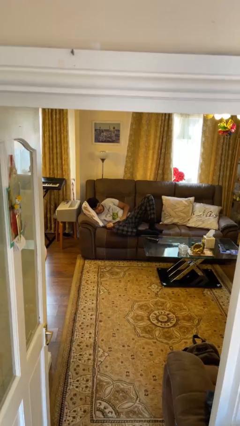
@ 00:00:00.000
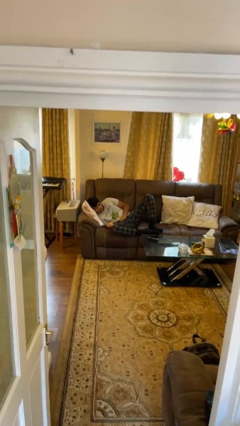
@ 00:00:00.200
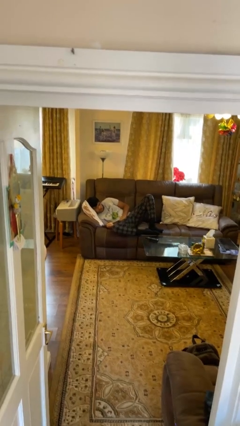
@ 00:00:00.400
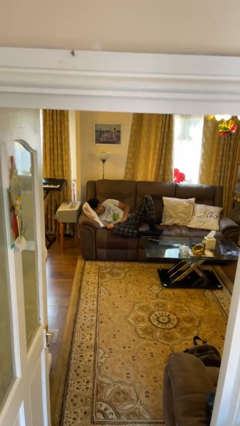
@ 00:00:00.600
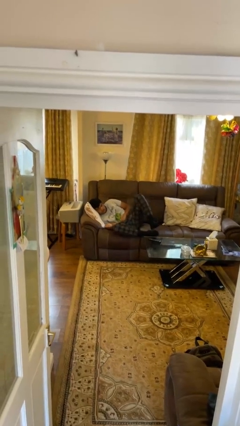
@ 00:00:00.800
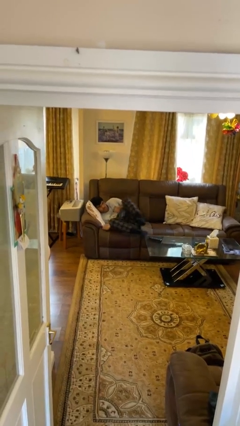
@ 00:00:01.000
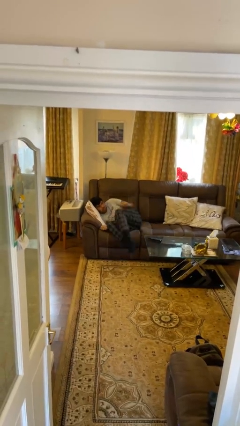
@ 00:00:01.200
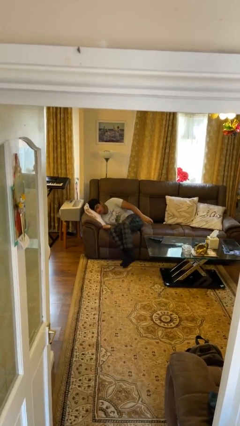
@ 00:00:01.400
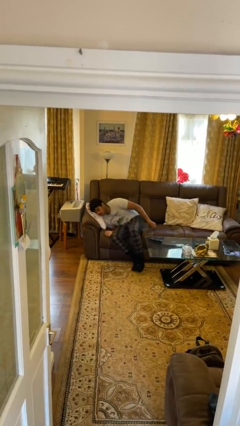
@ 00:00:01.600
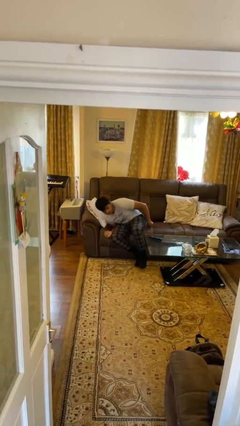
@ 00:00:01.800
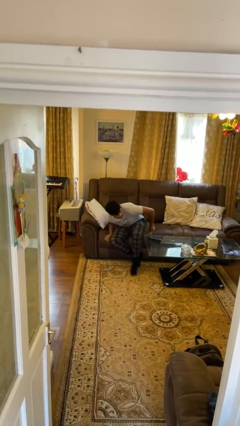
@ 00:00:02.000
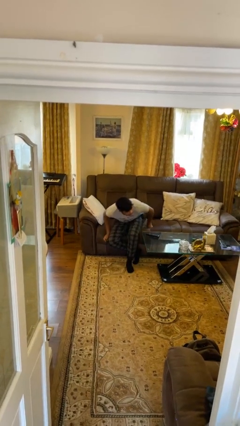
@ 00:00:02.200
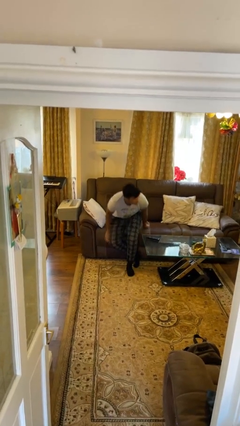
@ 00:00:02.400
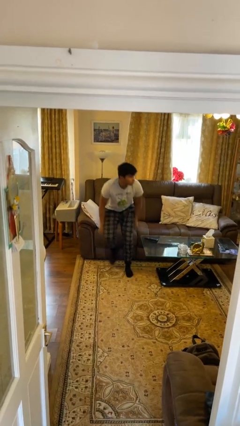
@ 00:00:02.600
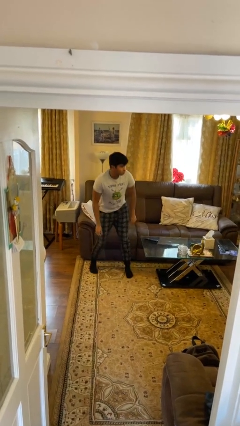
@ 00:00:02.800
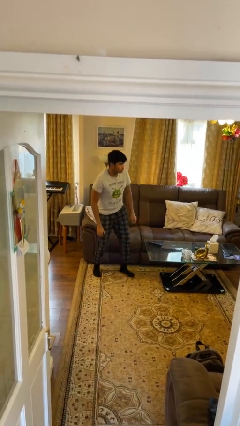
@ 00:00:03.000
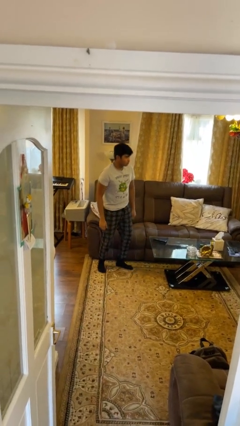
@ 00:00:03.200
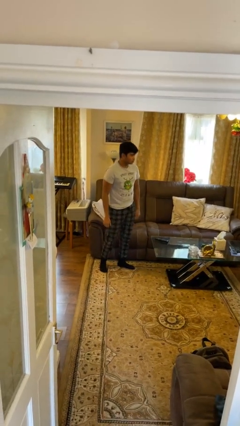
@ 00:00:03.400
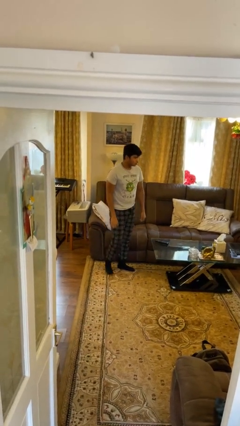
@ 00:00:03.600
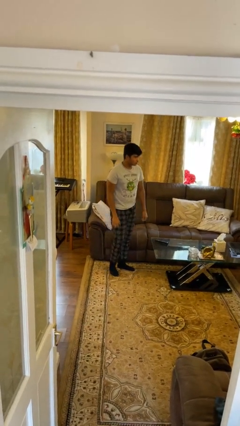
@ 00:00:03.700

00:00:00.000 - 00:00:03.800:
person stands up

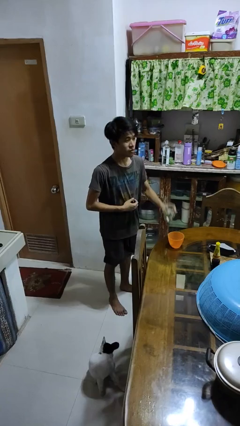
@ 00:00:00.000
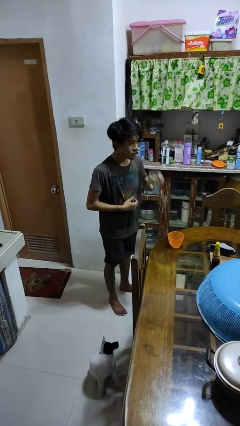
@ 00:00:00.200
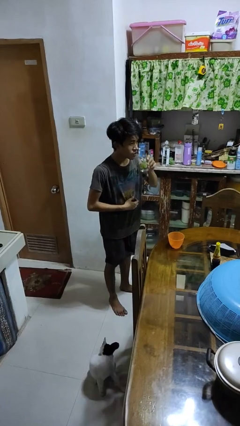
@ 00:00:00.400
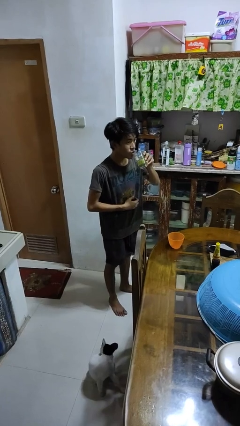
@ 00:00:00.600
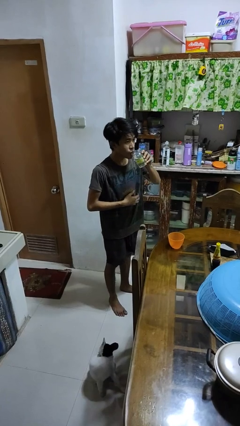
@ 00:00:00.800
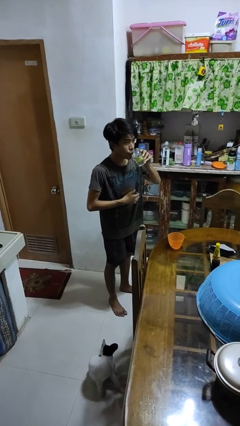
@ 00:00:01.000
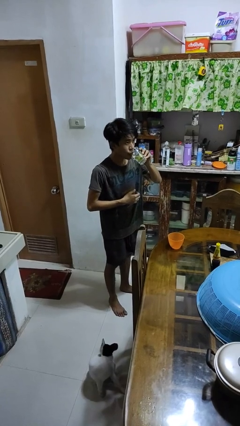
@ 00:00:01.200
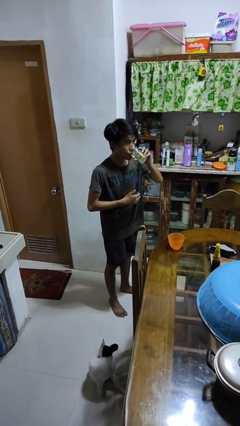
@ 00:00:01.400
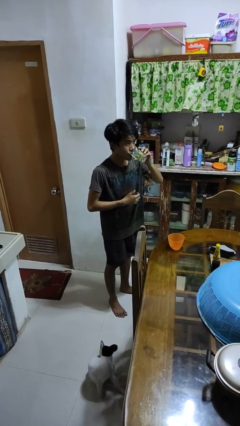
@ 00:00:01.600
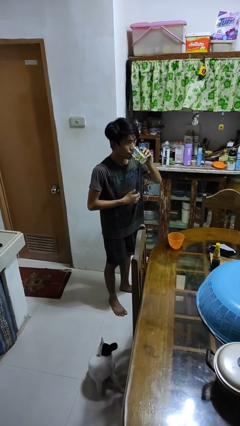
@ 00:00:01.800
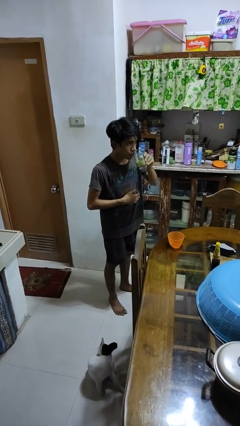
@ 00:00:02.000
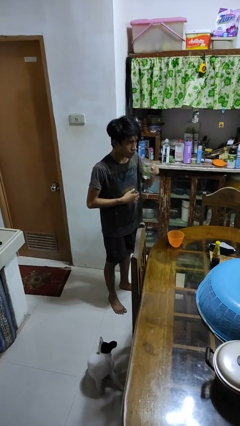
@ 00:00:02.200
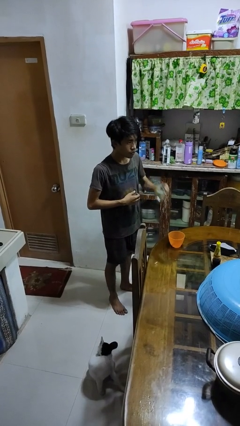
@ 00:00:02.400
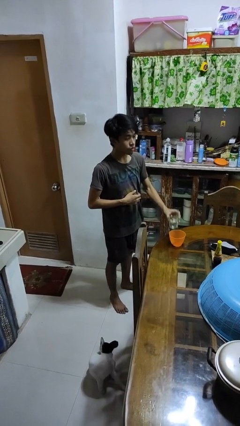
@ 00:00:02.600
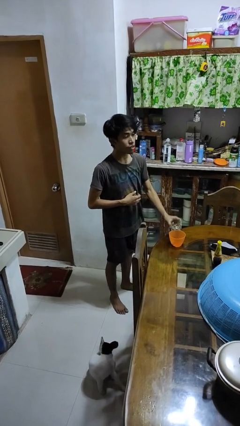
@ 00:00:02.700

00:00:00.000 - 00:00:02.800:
person drinks from cup

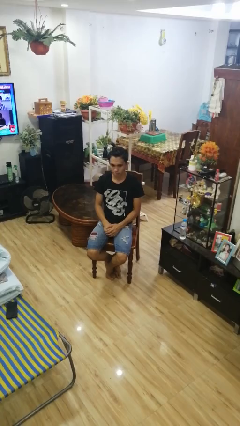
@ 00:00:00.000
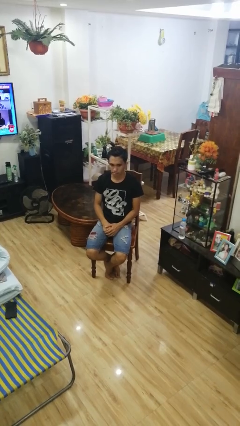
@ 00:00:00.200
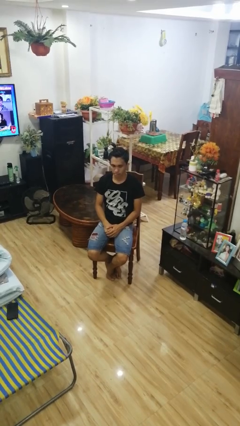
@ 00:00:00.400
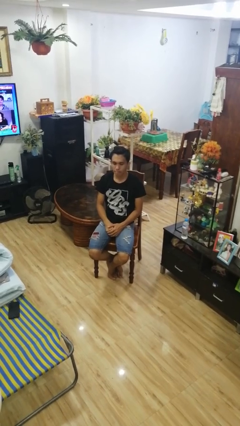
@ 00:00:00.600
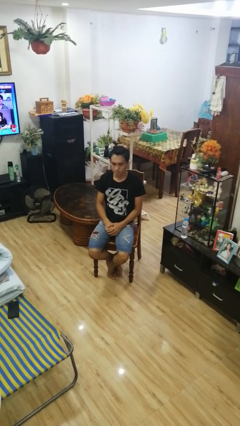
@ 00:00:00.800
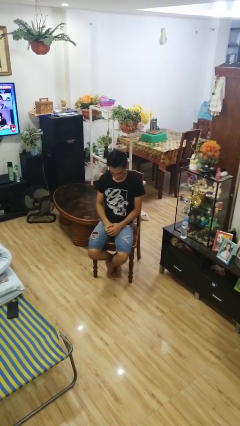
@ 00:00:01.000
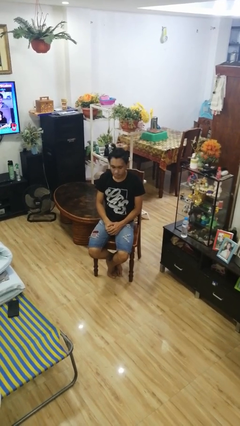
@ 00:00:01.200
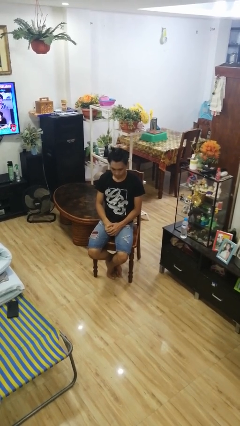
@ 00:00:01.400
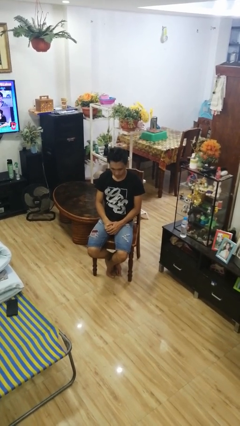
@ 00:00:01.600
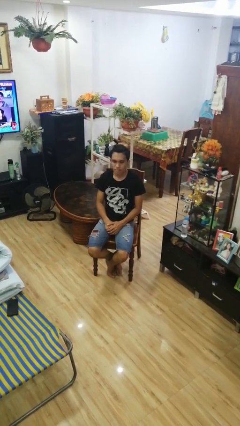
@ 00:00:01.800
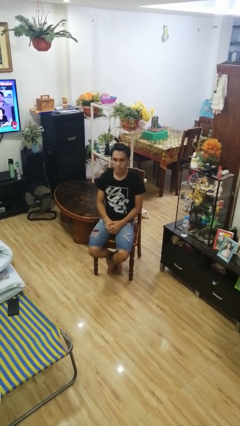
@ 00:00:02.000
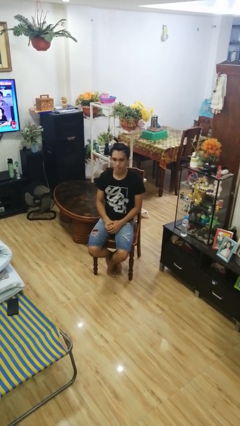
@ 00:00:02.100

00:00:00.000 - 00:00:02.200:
person nods head

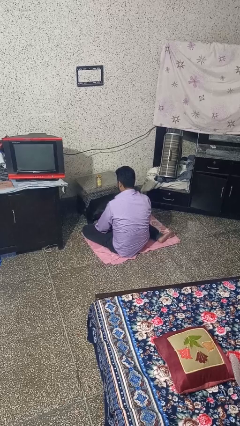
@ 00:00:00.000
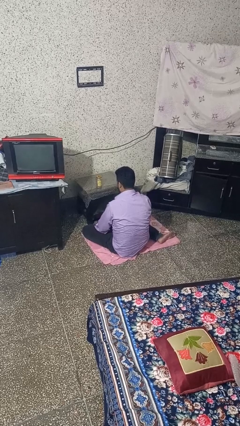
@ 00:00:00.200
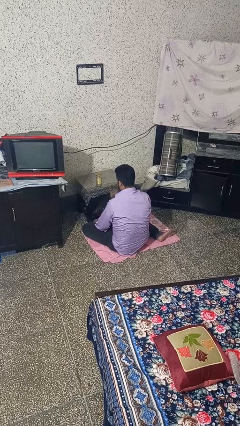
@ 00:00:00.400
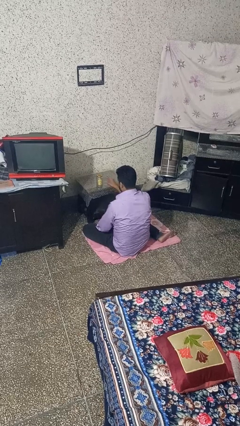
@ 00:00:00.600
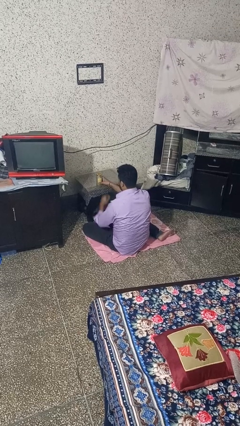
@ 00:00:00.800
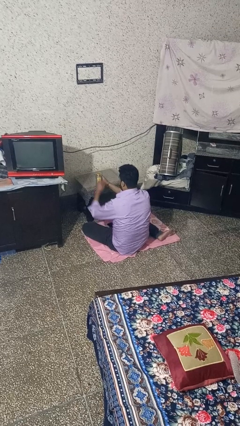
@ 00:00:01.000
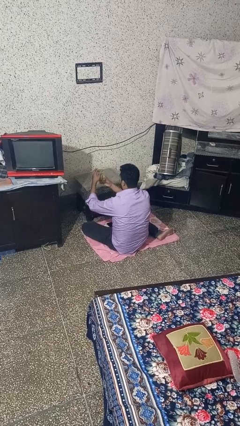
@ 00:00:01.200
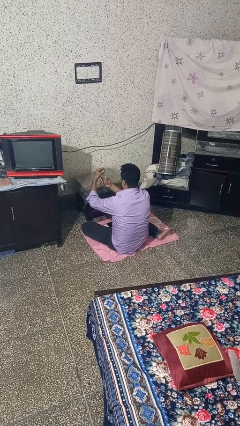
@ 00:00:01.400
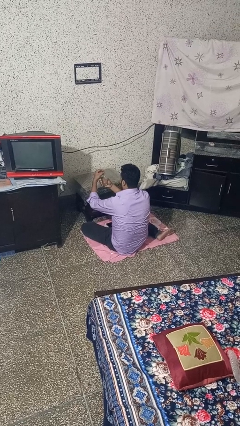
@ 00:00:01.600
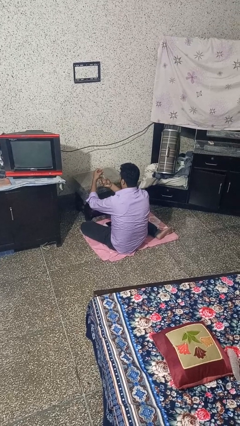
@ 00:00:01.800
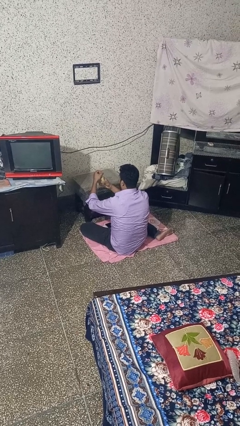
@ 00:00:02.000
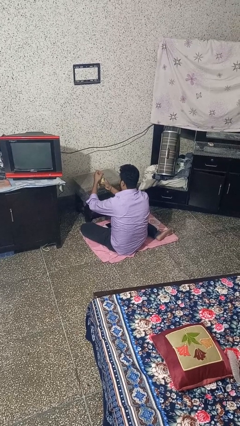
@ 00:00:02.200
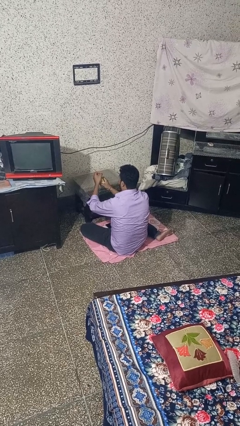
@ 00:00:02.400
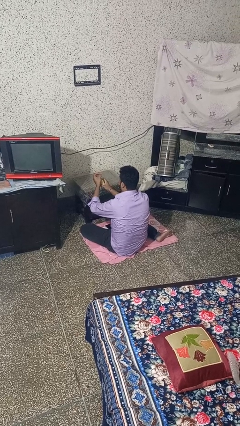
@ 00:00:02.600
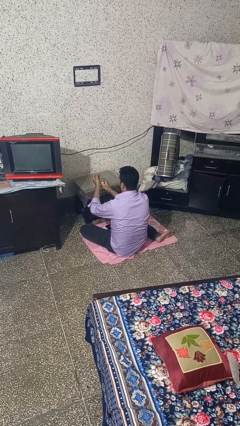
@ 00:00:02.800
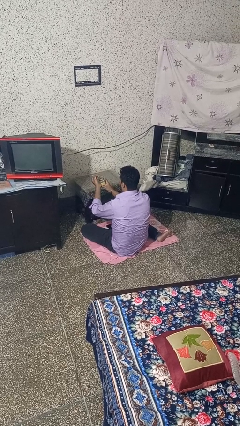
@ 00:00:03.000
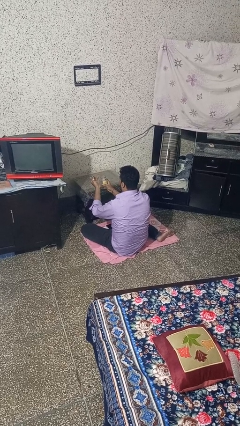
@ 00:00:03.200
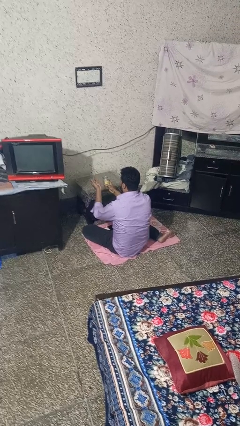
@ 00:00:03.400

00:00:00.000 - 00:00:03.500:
person opens jar

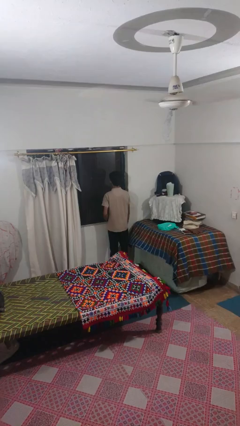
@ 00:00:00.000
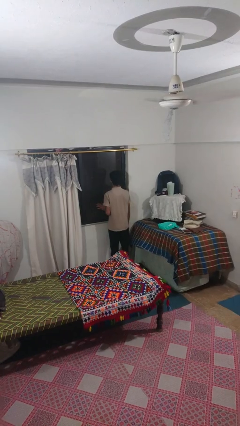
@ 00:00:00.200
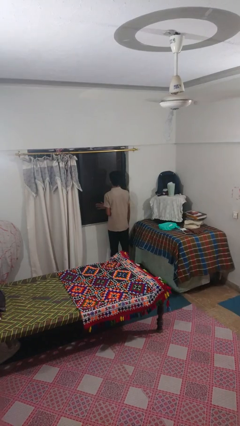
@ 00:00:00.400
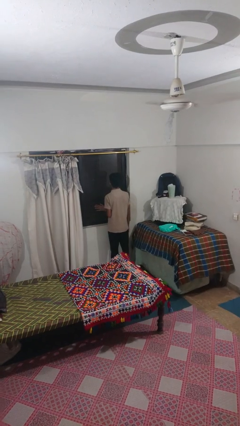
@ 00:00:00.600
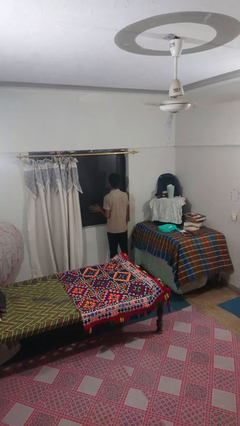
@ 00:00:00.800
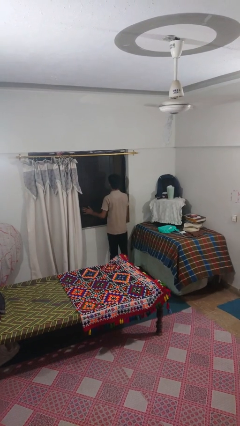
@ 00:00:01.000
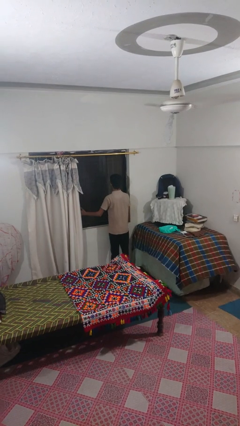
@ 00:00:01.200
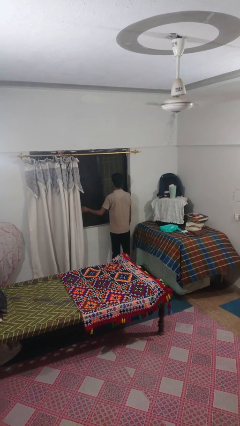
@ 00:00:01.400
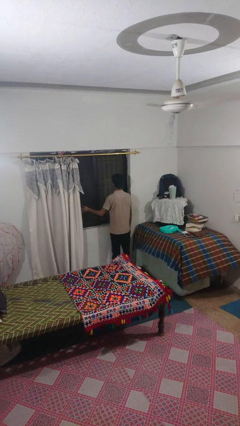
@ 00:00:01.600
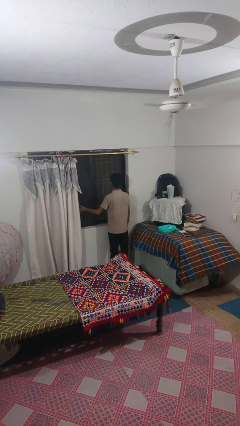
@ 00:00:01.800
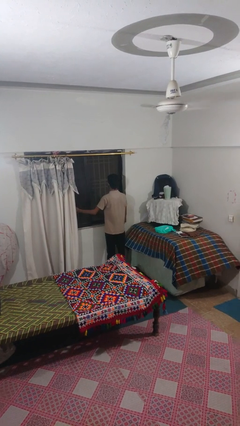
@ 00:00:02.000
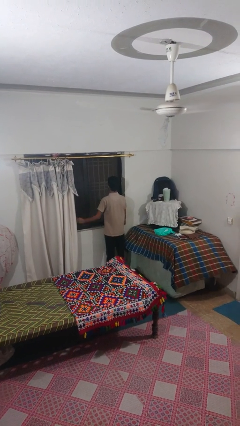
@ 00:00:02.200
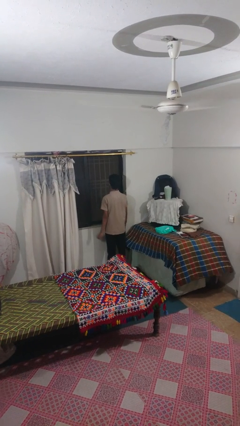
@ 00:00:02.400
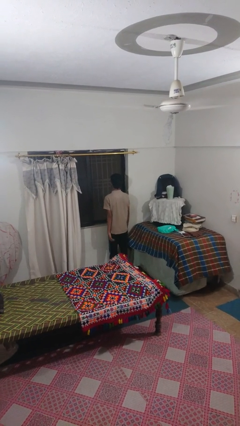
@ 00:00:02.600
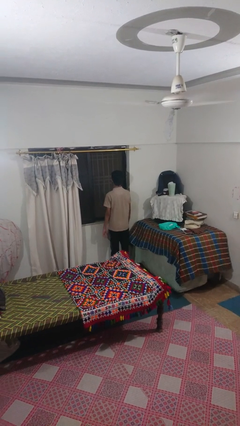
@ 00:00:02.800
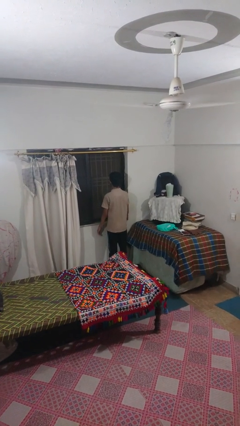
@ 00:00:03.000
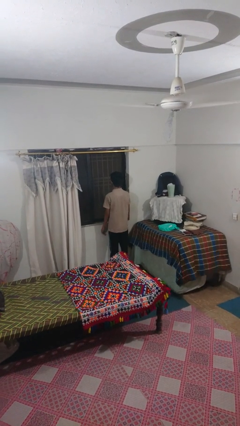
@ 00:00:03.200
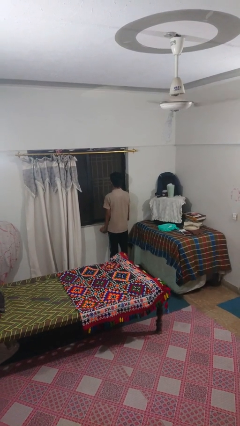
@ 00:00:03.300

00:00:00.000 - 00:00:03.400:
person opens sliding door

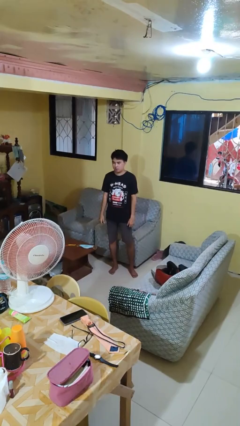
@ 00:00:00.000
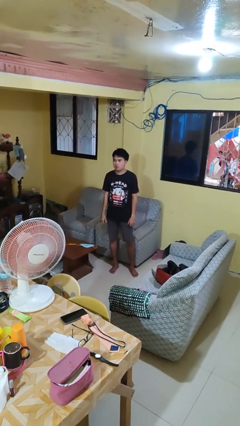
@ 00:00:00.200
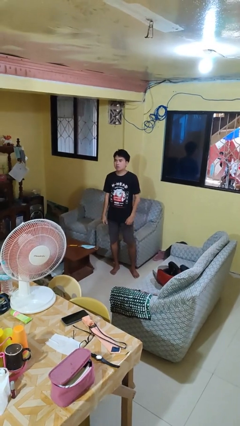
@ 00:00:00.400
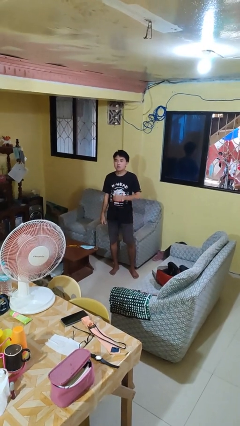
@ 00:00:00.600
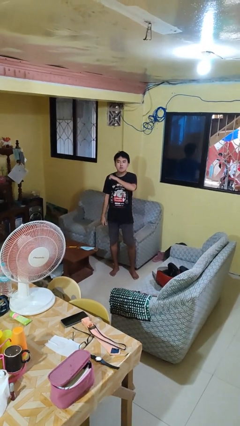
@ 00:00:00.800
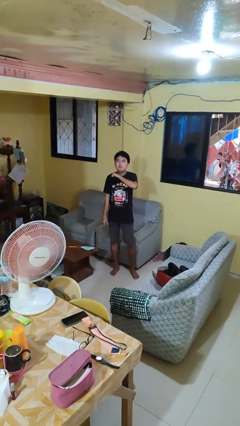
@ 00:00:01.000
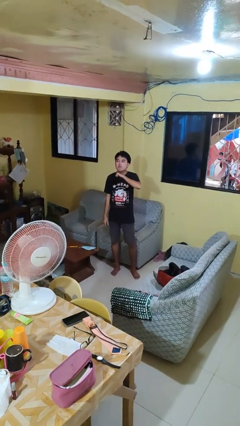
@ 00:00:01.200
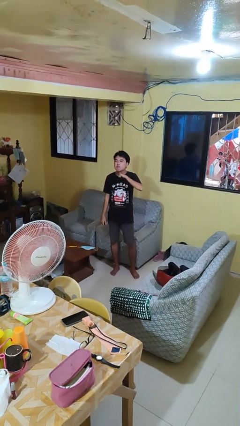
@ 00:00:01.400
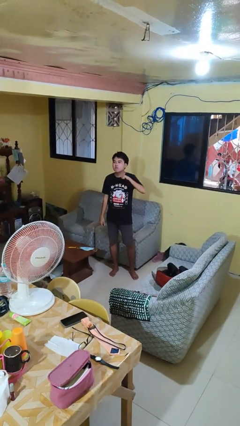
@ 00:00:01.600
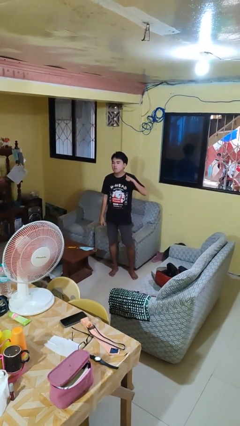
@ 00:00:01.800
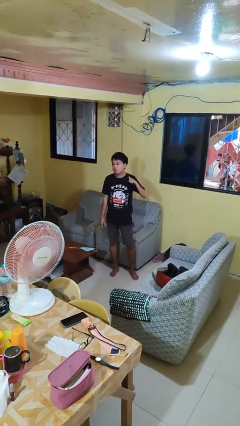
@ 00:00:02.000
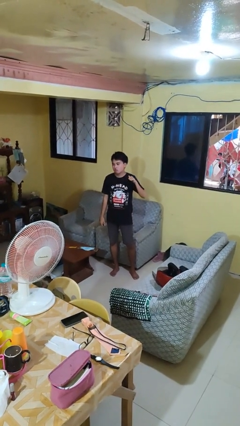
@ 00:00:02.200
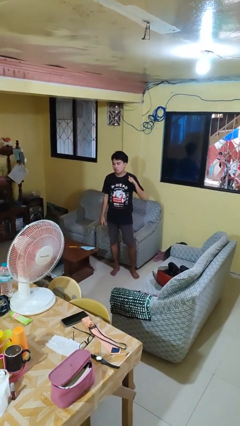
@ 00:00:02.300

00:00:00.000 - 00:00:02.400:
person gestures cut
